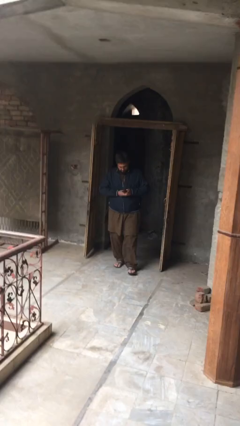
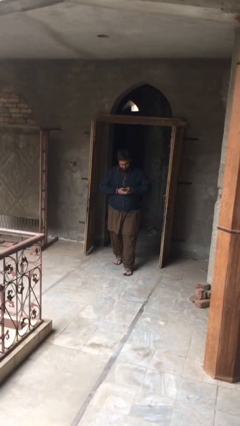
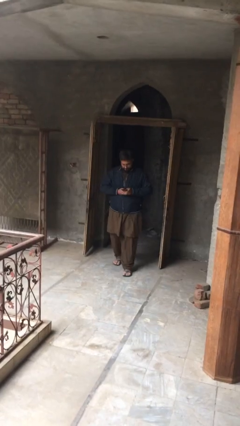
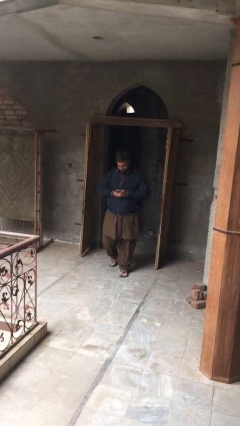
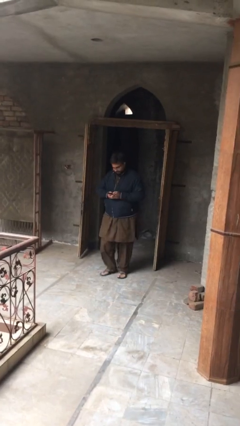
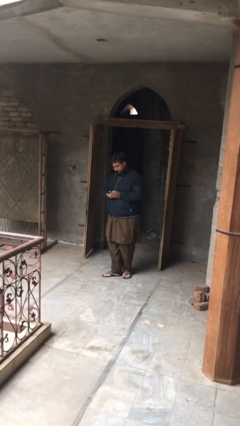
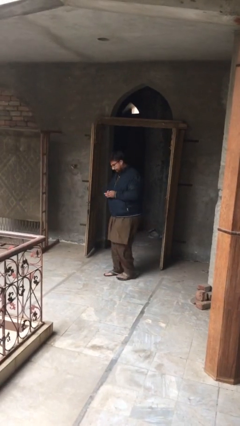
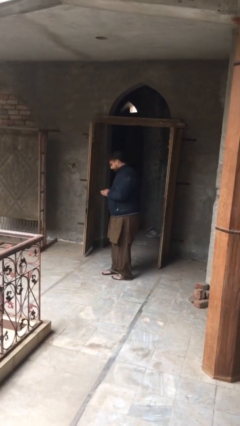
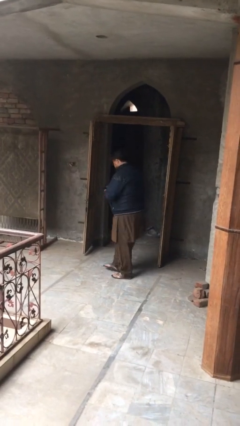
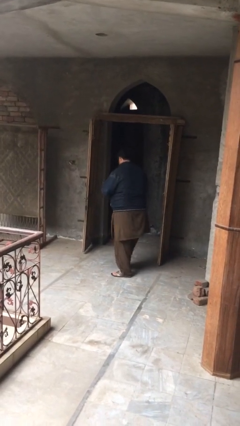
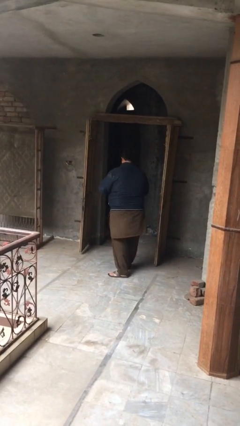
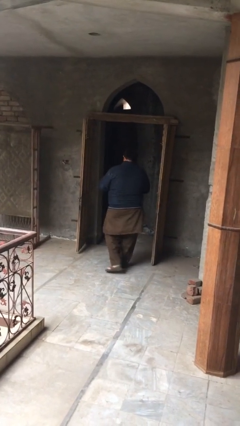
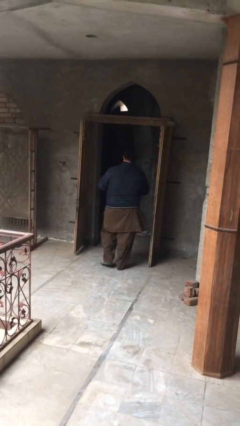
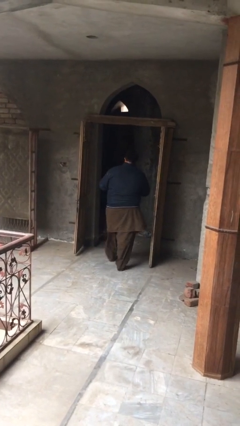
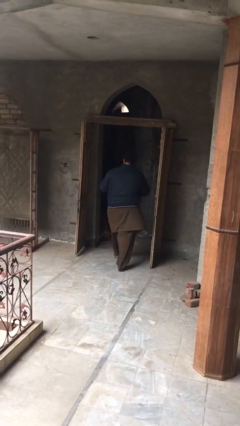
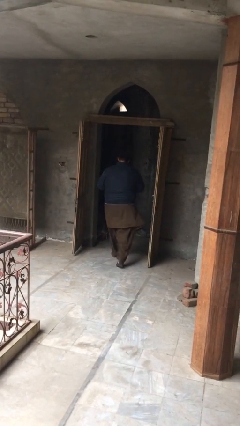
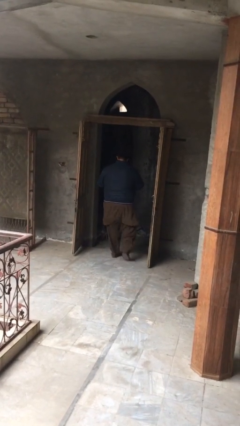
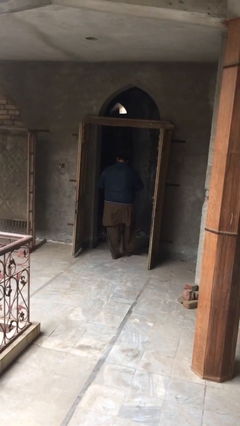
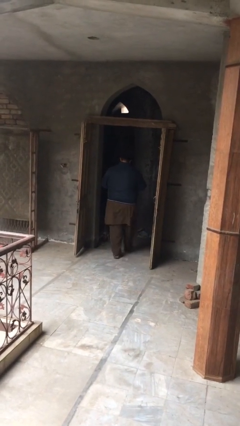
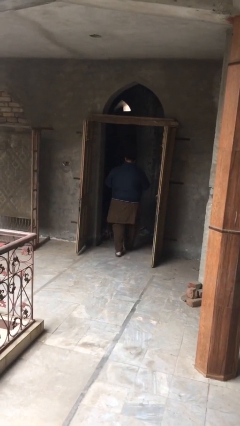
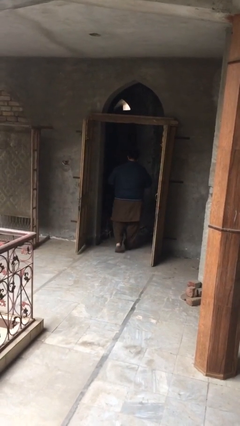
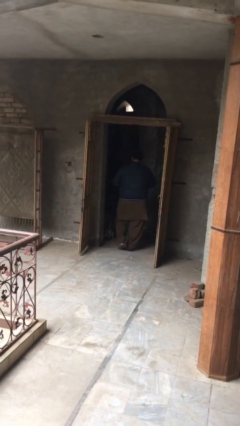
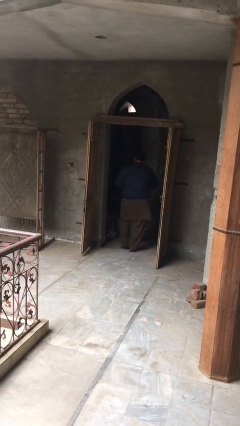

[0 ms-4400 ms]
person exits scene through structure

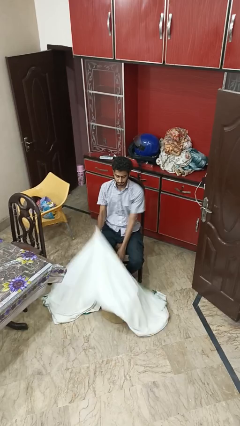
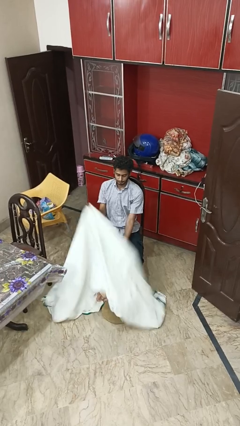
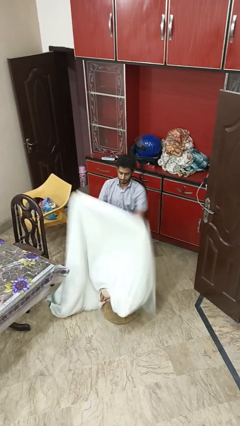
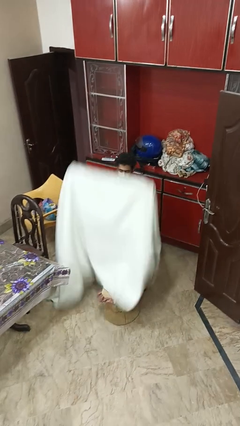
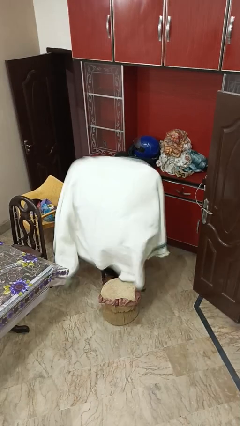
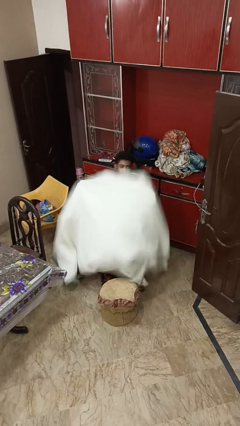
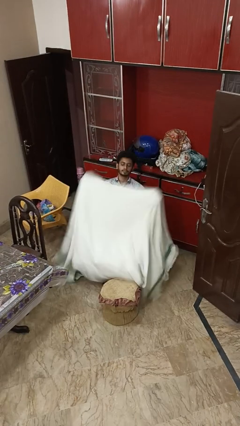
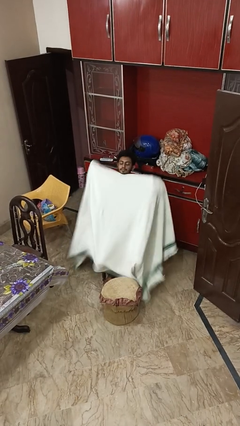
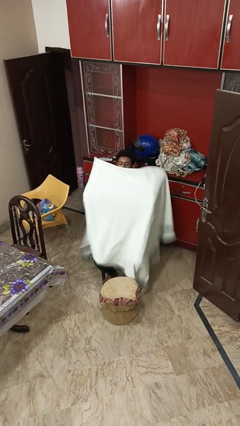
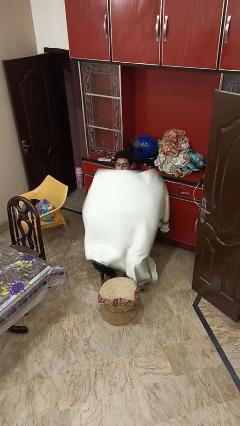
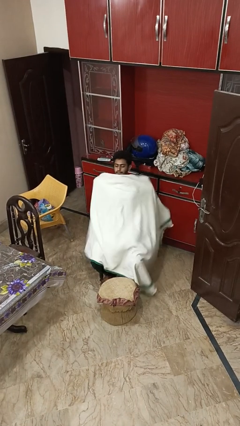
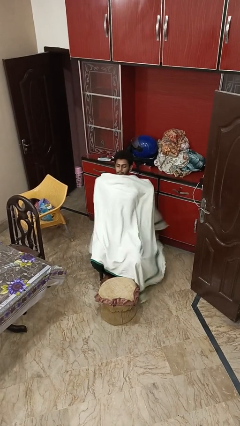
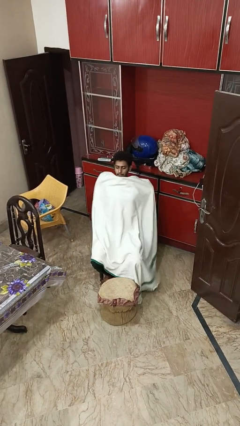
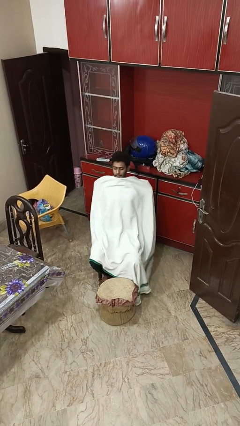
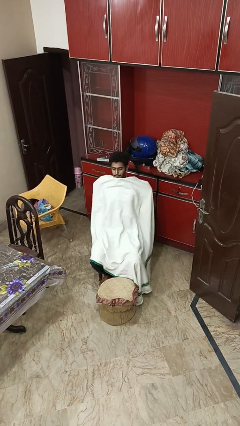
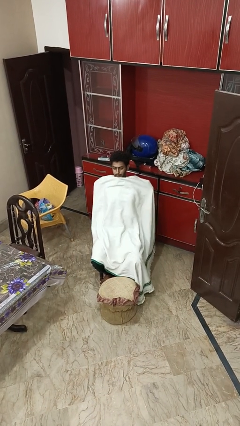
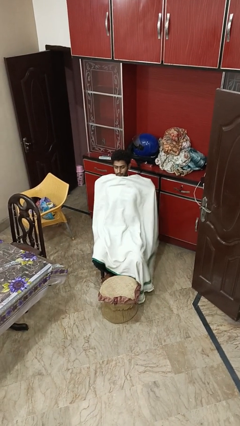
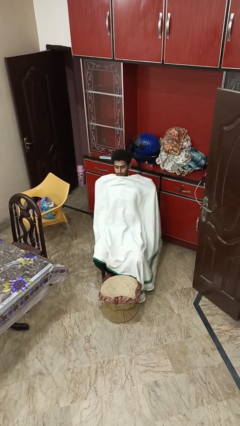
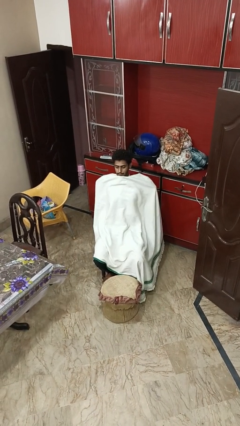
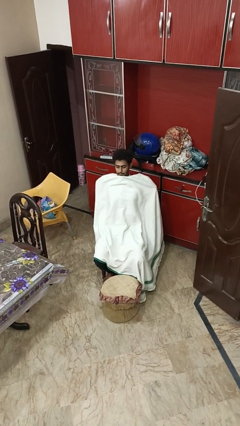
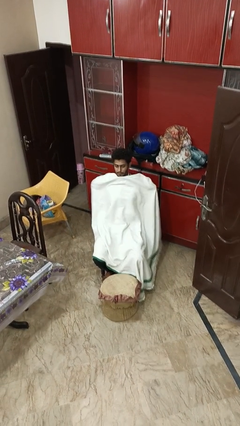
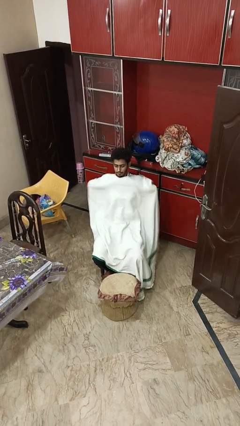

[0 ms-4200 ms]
person covers with blanket

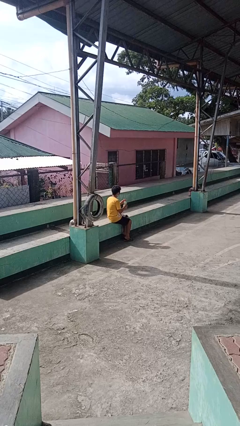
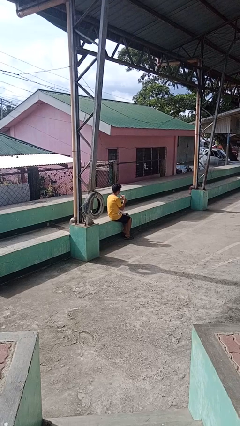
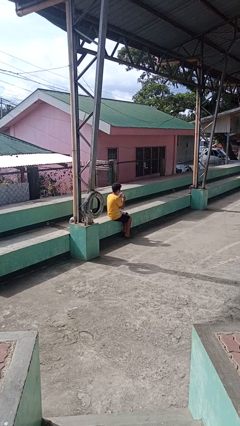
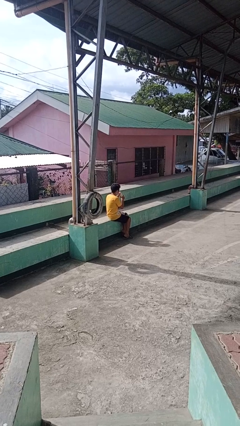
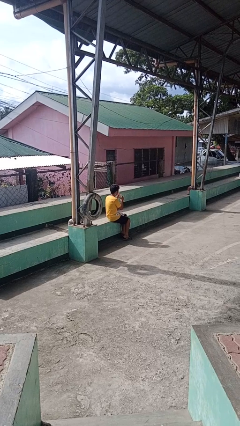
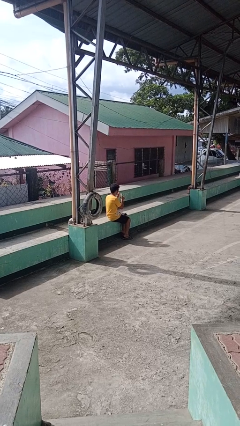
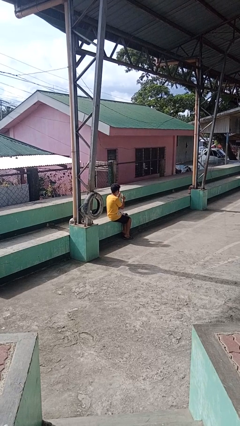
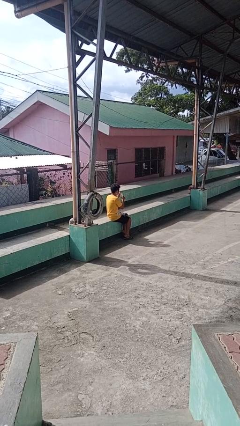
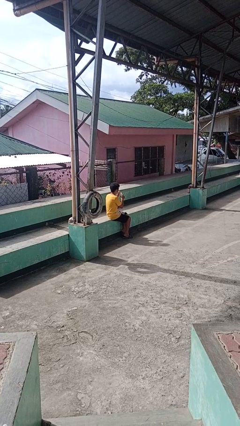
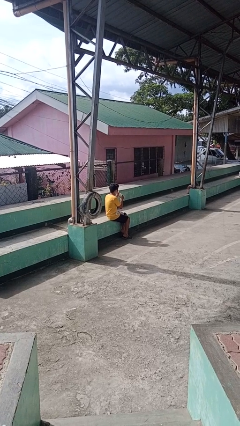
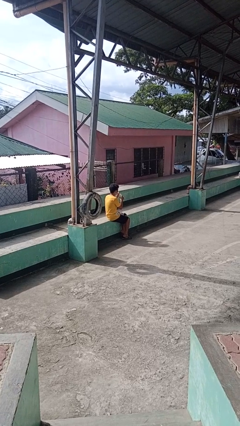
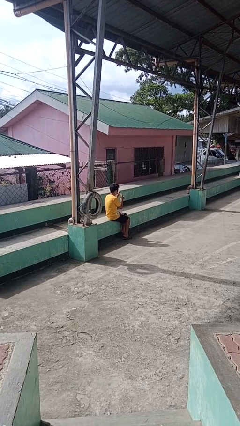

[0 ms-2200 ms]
person drinks from straw

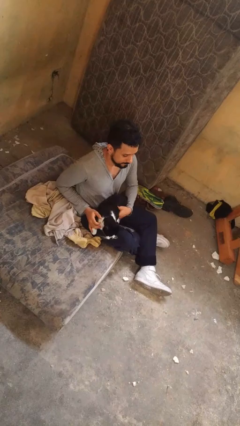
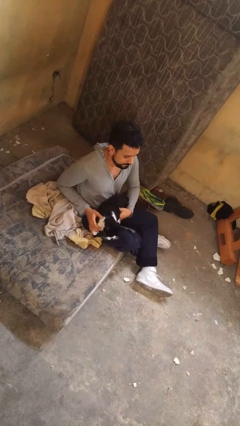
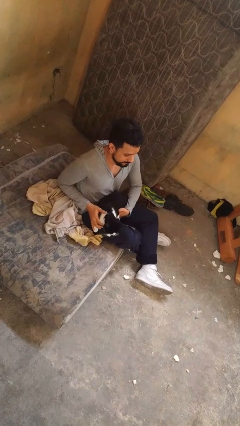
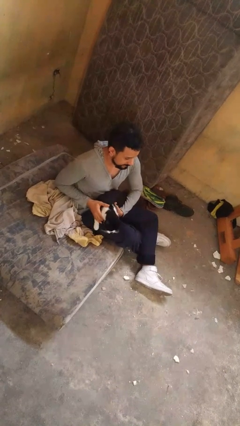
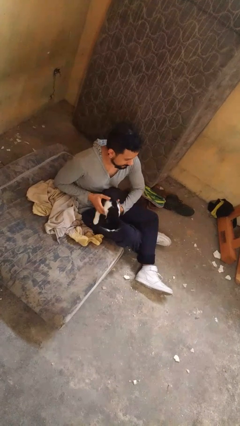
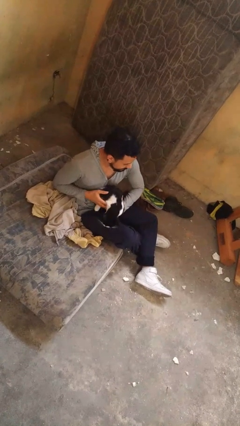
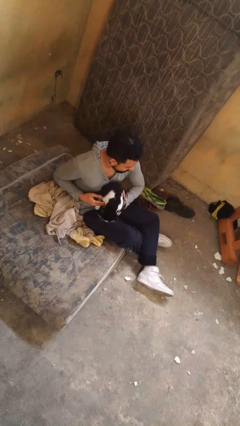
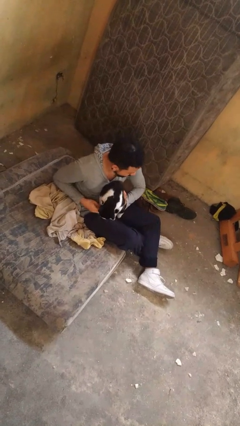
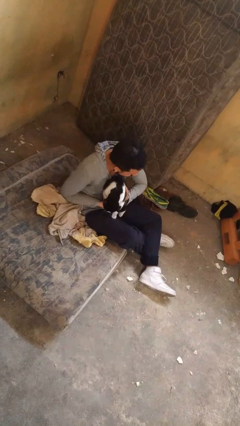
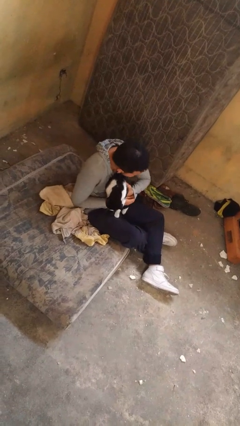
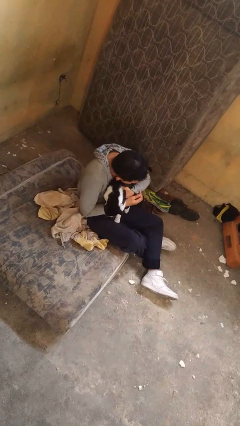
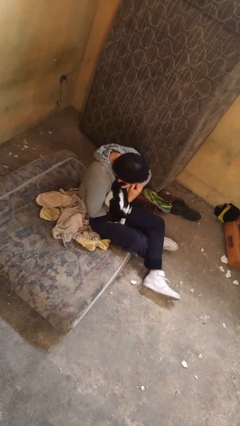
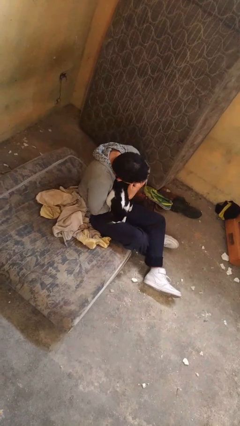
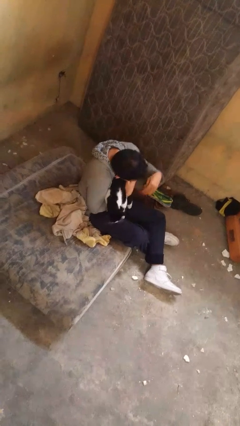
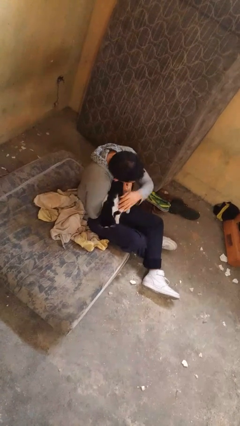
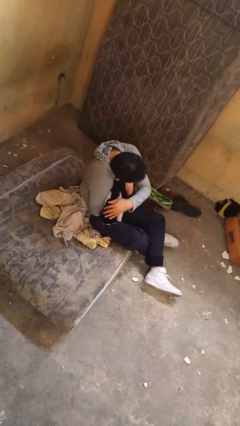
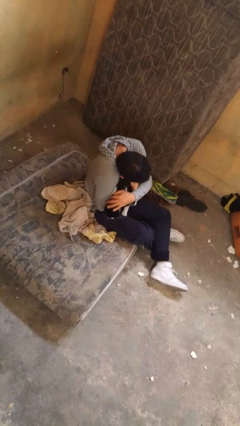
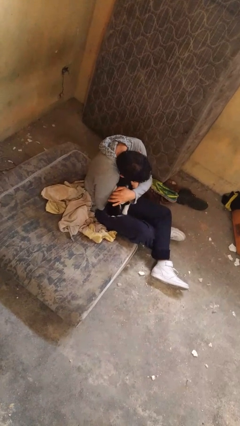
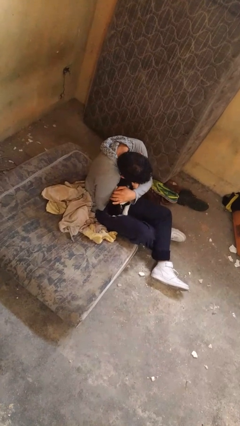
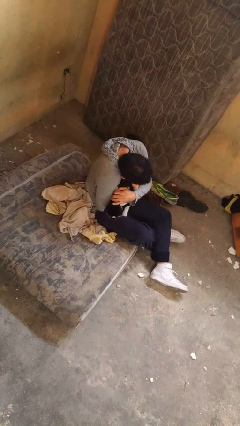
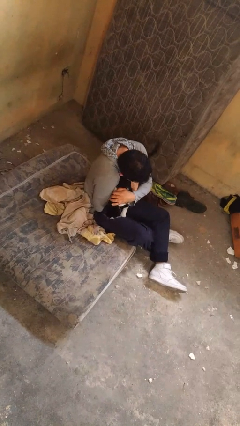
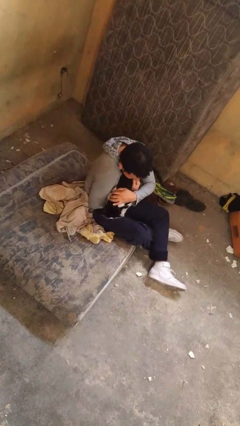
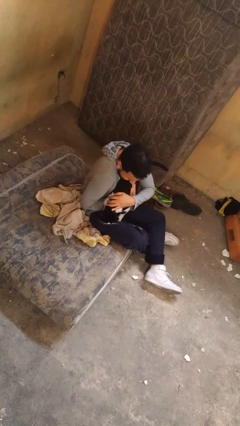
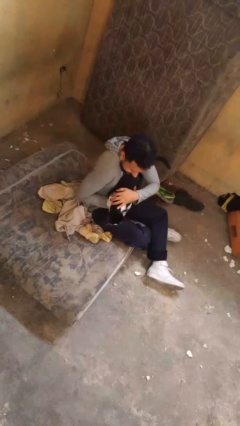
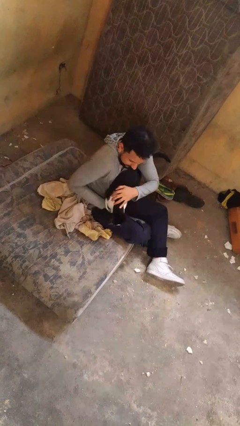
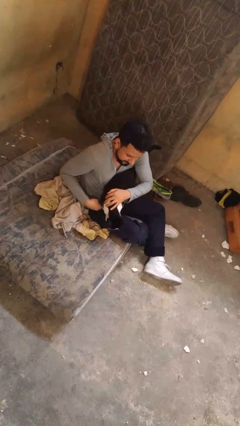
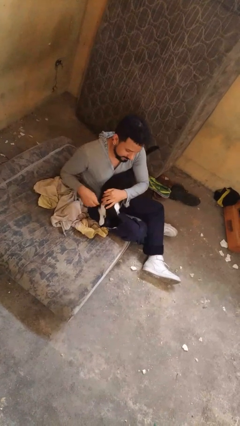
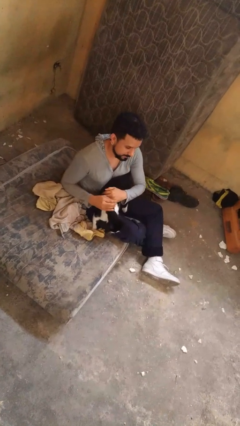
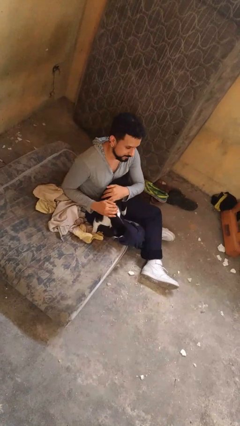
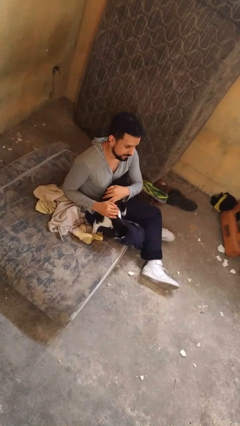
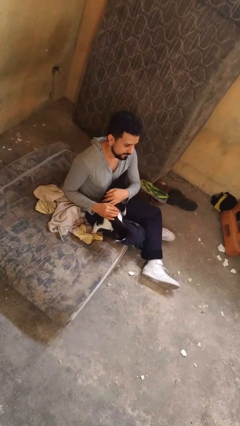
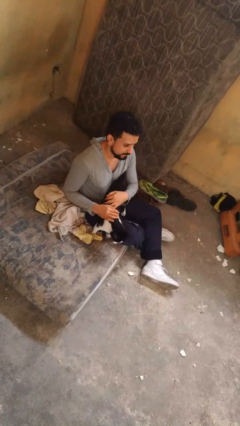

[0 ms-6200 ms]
person hugs cat

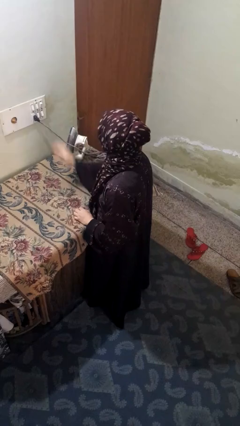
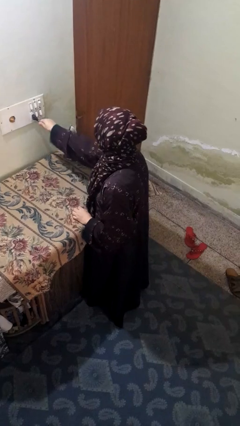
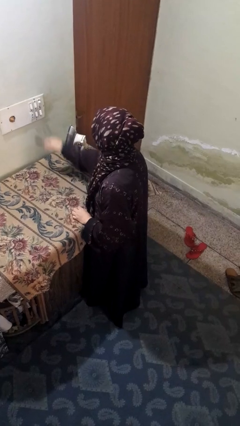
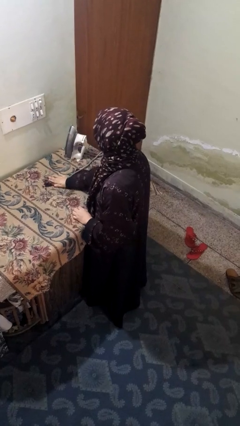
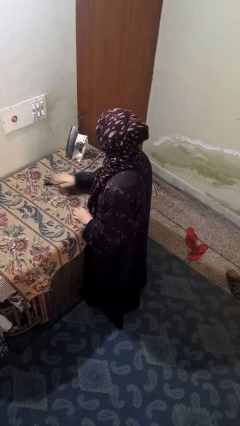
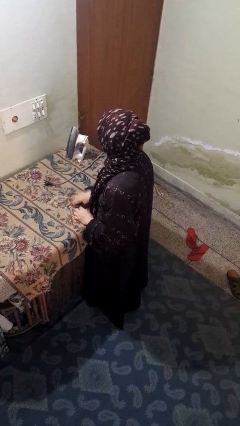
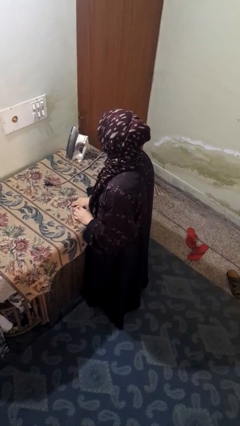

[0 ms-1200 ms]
person unplugs from electrical socket
